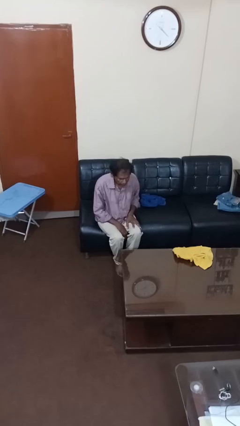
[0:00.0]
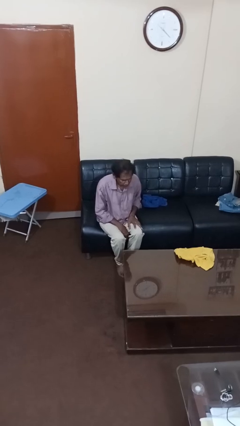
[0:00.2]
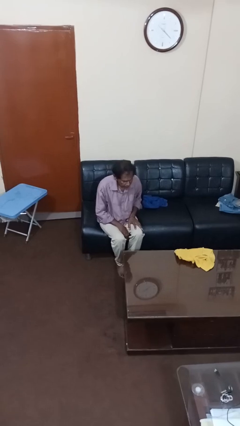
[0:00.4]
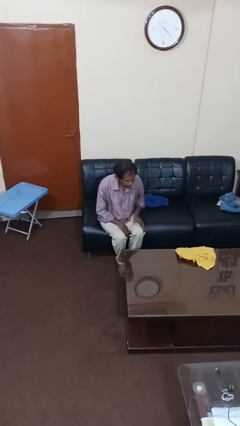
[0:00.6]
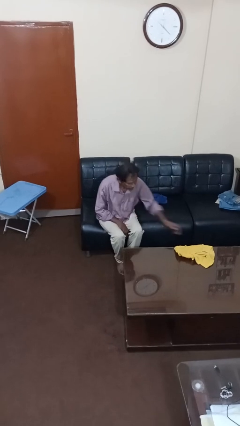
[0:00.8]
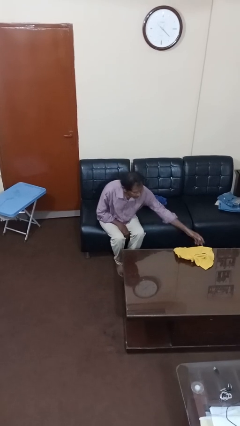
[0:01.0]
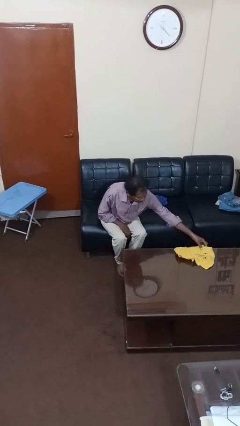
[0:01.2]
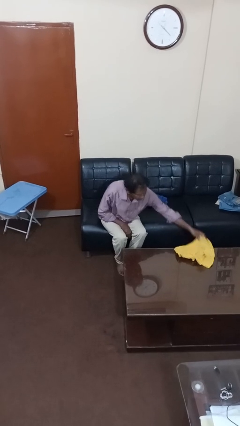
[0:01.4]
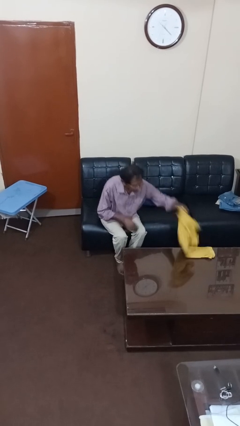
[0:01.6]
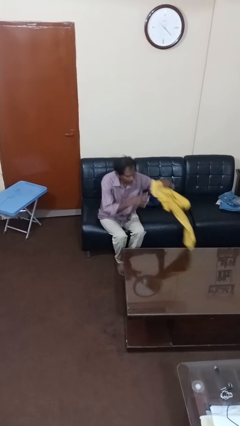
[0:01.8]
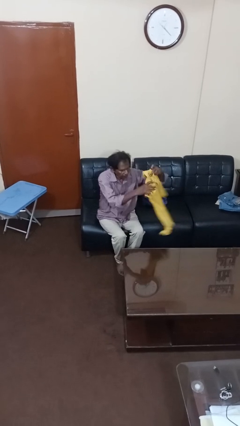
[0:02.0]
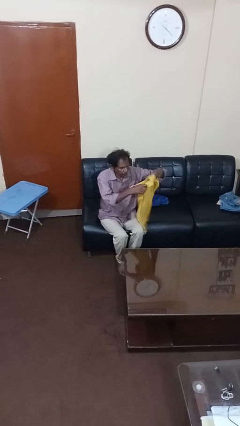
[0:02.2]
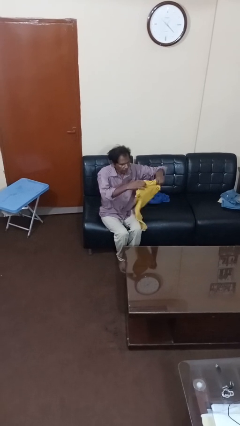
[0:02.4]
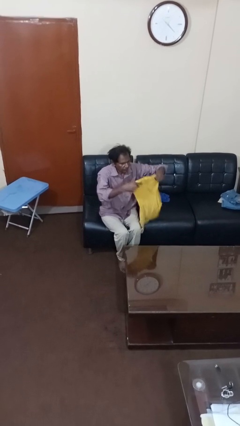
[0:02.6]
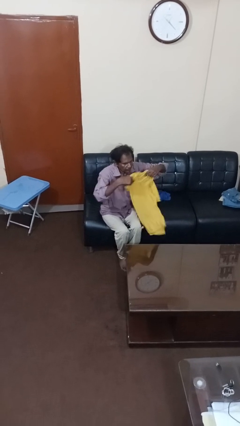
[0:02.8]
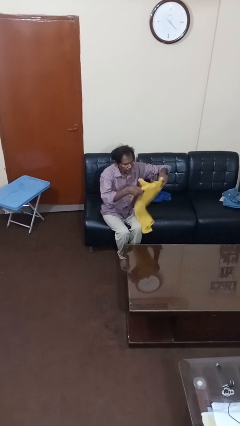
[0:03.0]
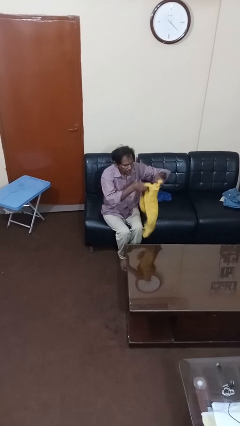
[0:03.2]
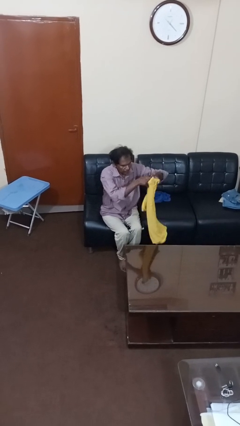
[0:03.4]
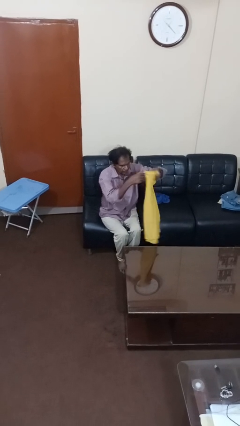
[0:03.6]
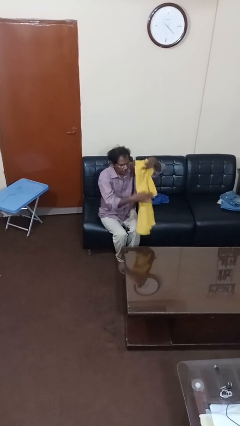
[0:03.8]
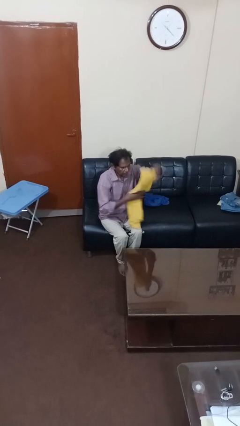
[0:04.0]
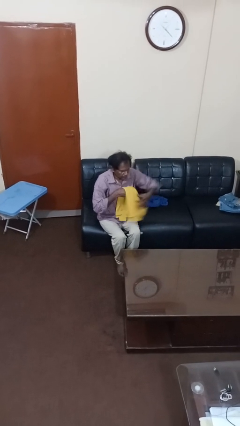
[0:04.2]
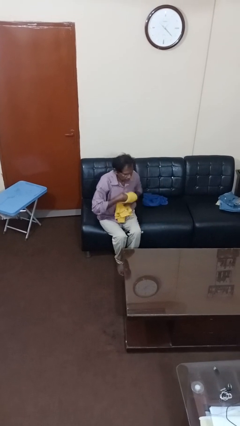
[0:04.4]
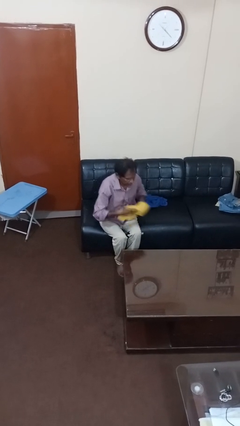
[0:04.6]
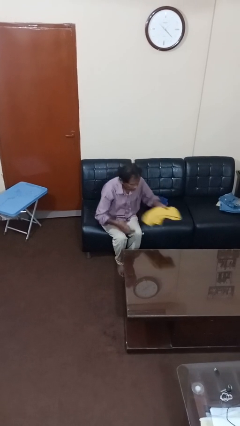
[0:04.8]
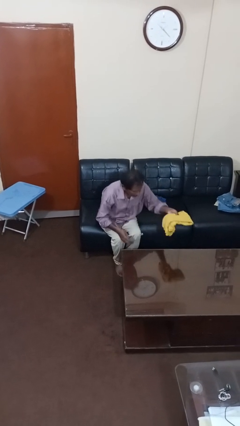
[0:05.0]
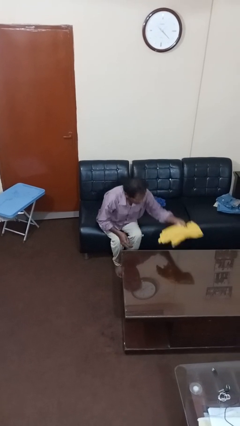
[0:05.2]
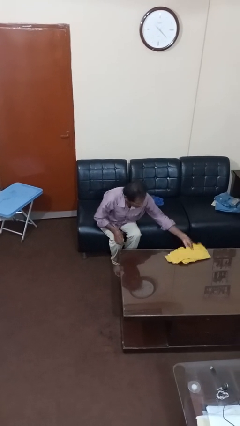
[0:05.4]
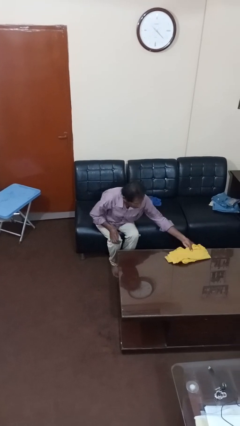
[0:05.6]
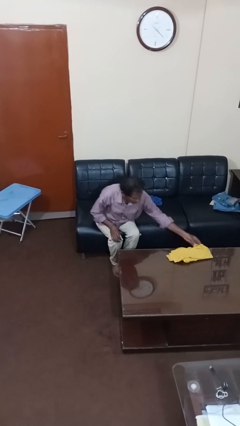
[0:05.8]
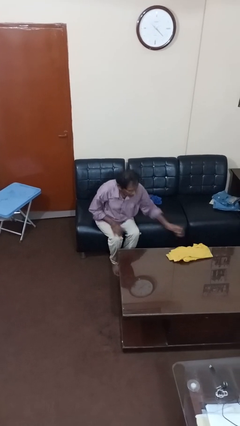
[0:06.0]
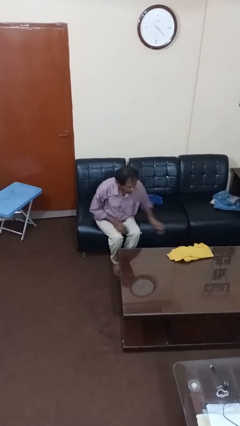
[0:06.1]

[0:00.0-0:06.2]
person folds shirt

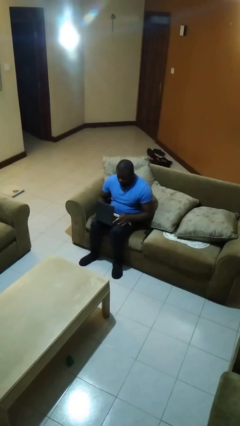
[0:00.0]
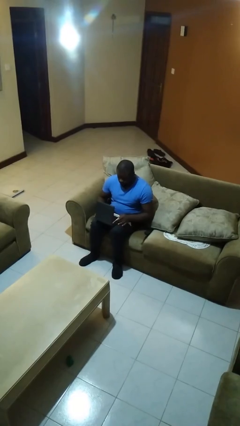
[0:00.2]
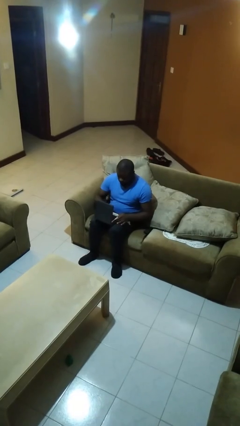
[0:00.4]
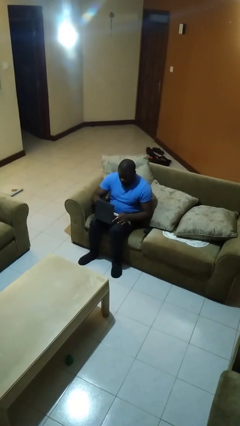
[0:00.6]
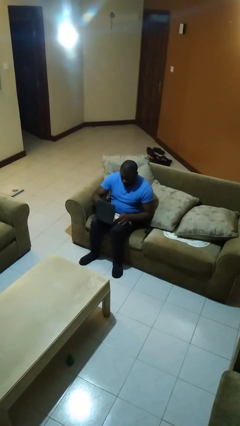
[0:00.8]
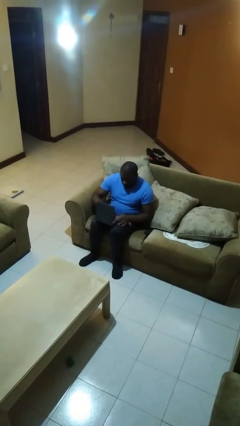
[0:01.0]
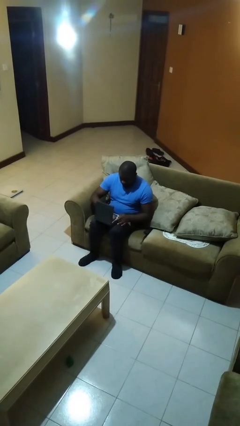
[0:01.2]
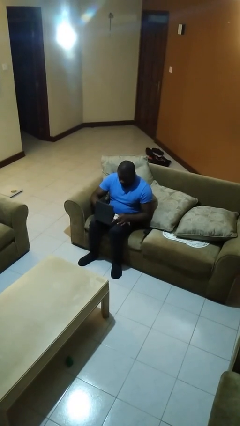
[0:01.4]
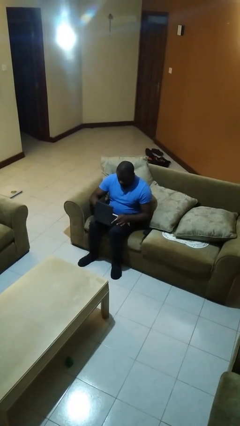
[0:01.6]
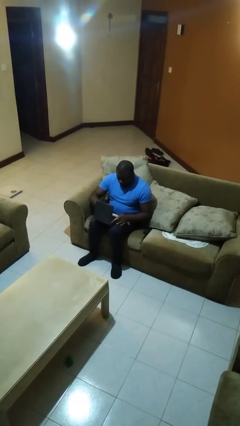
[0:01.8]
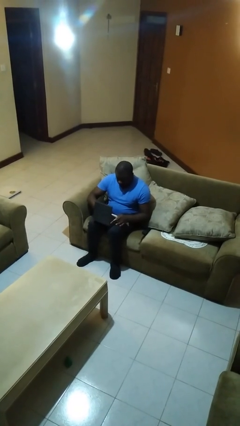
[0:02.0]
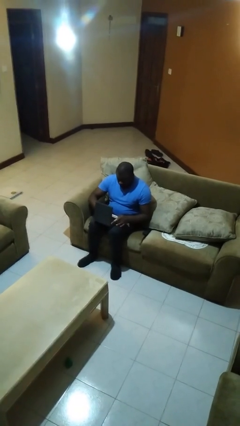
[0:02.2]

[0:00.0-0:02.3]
person searches jewelry box

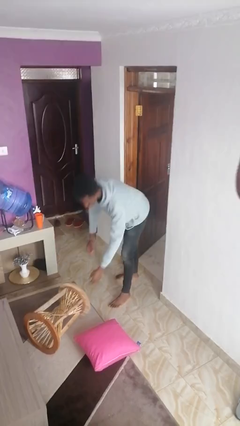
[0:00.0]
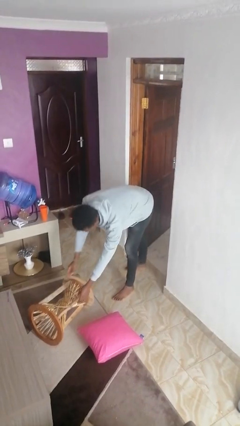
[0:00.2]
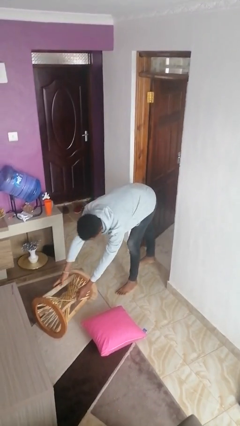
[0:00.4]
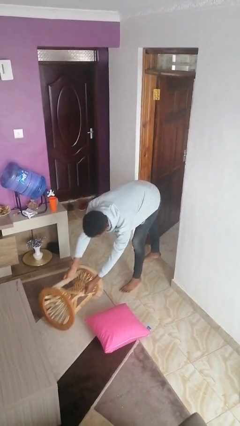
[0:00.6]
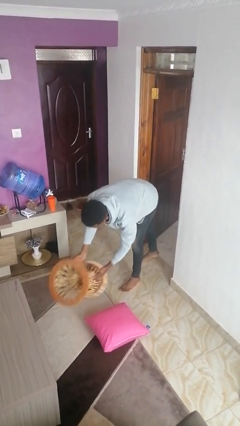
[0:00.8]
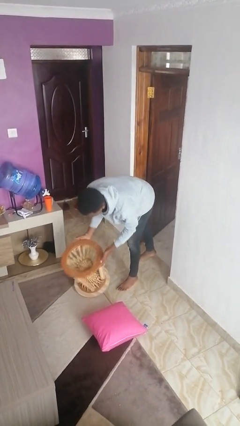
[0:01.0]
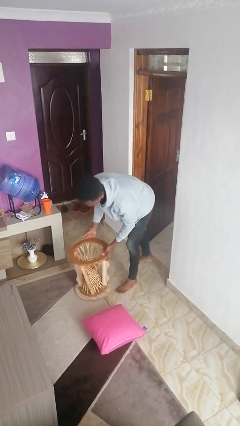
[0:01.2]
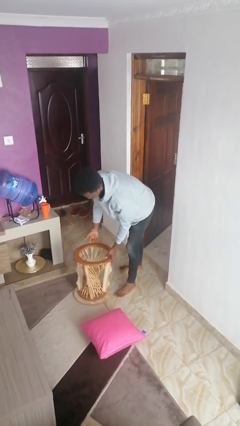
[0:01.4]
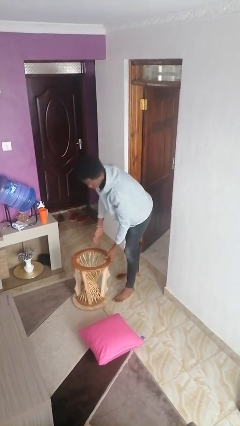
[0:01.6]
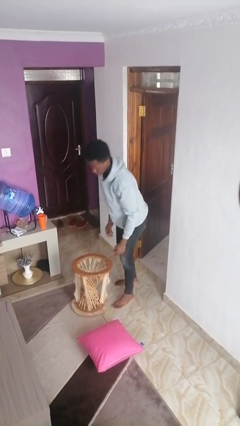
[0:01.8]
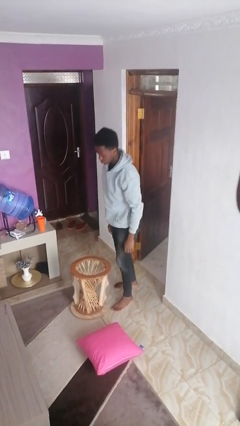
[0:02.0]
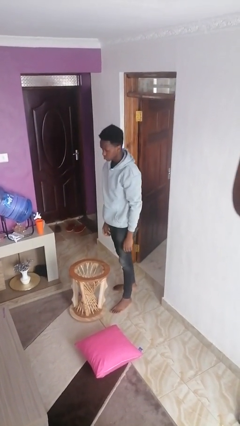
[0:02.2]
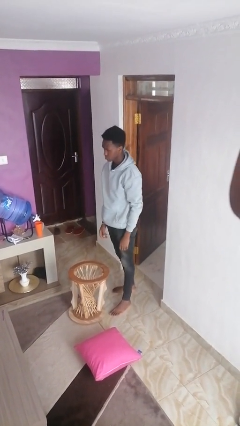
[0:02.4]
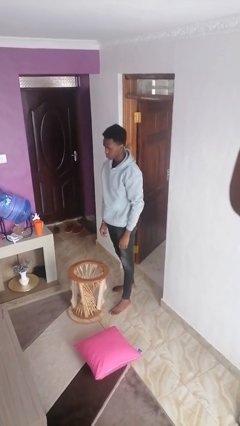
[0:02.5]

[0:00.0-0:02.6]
person sets upright furniture

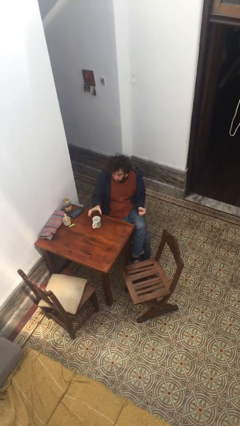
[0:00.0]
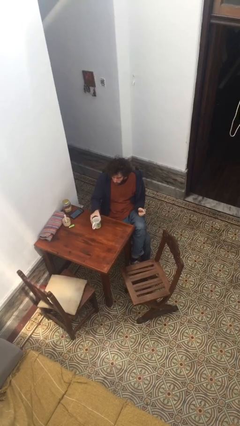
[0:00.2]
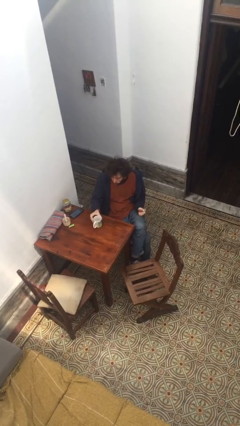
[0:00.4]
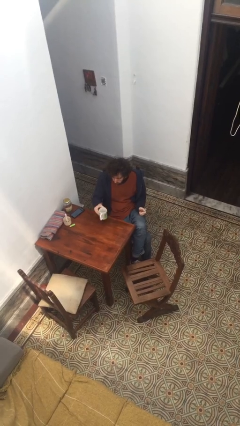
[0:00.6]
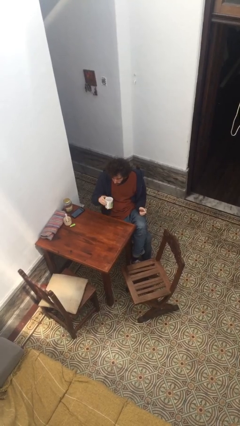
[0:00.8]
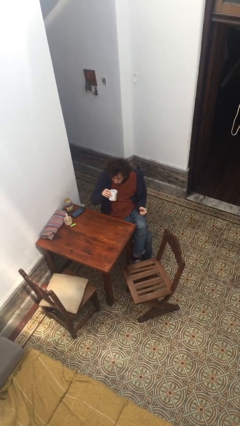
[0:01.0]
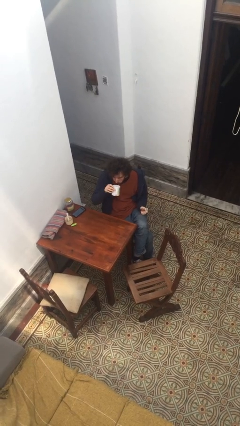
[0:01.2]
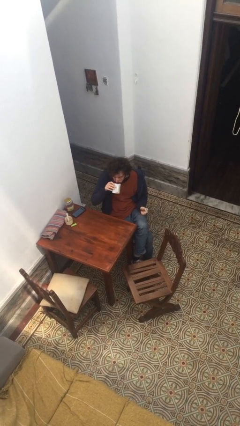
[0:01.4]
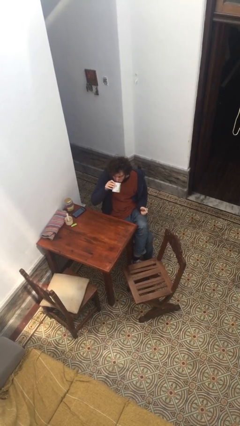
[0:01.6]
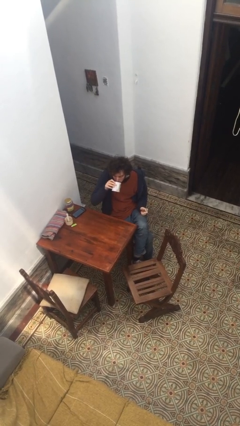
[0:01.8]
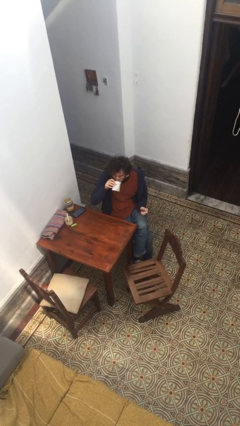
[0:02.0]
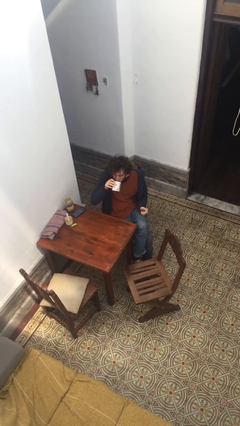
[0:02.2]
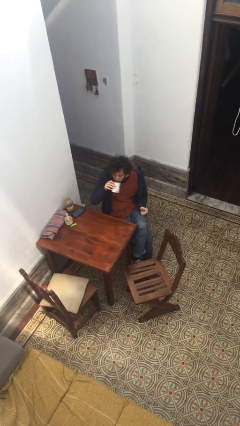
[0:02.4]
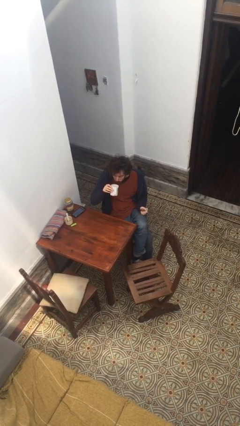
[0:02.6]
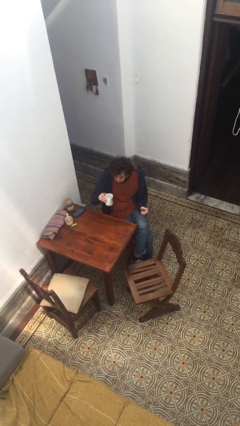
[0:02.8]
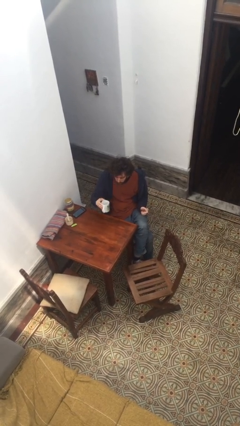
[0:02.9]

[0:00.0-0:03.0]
person drinks from cup

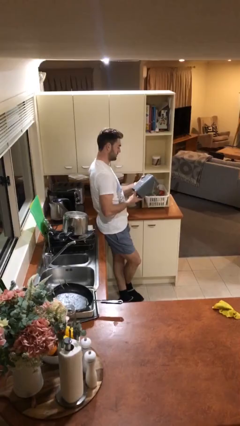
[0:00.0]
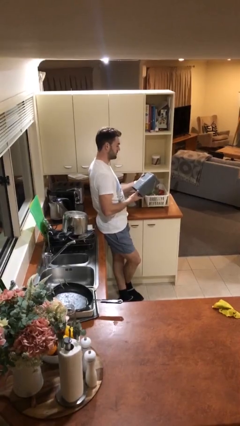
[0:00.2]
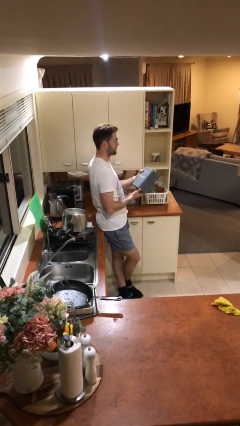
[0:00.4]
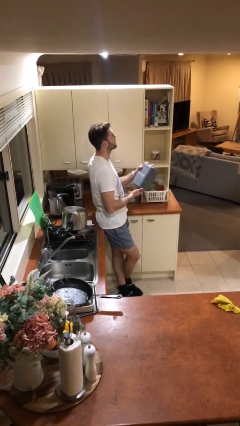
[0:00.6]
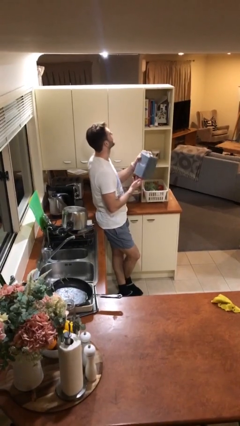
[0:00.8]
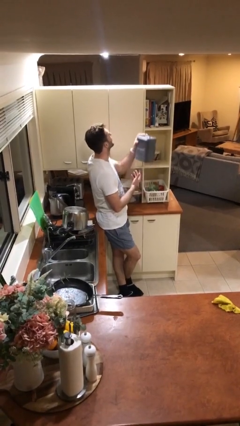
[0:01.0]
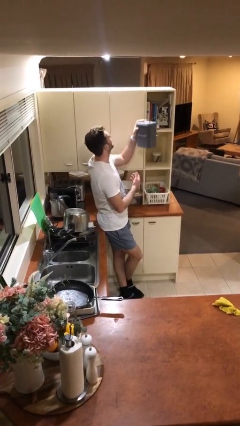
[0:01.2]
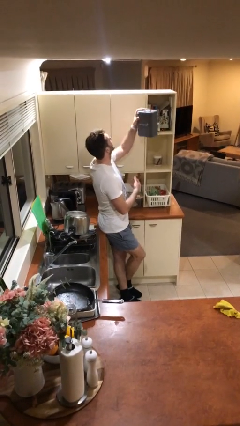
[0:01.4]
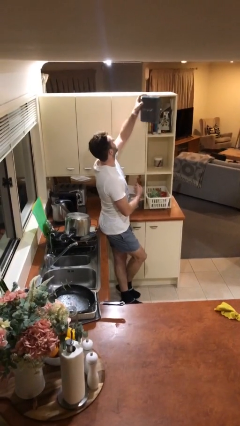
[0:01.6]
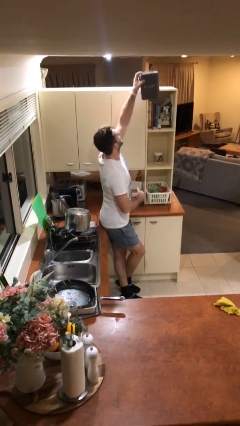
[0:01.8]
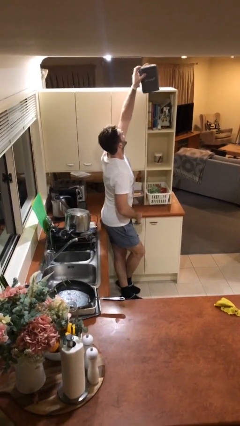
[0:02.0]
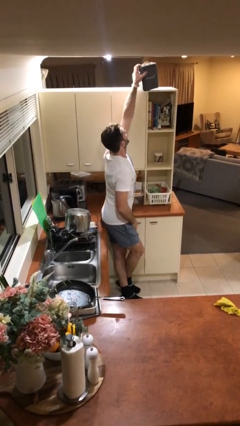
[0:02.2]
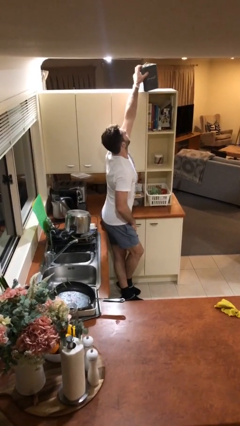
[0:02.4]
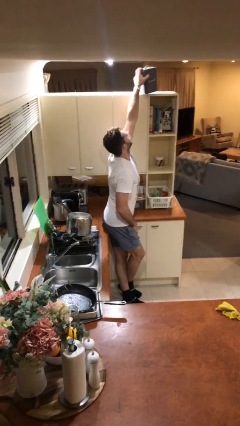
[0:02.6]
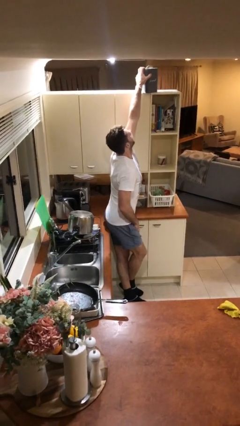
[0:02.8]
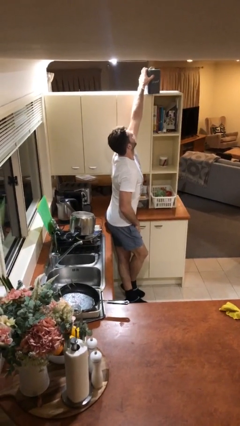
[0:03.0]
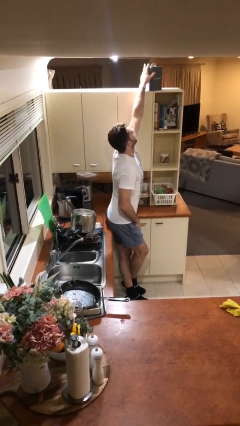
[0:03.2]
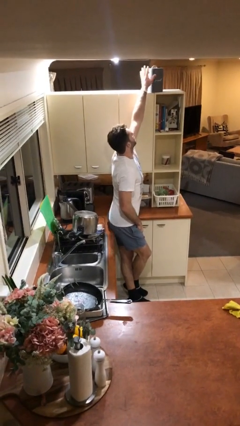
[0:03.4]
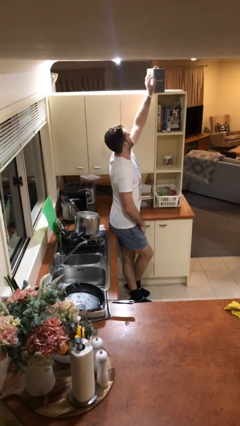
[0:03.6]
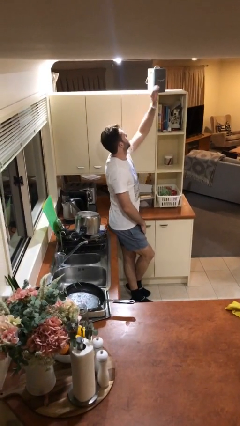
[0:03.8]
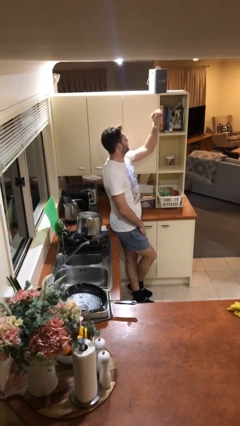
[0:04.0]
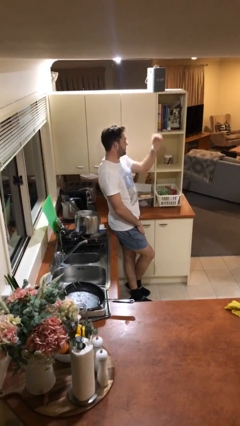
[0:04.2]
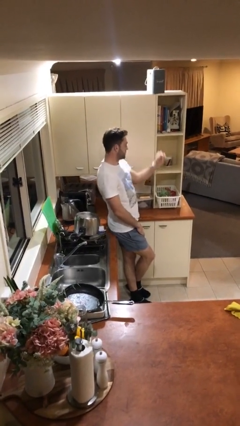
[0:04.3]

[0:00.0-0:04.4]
person puts down object on shelf
